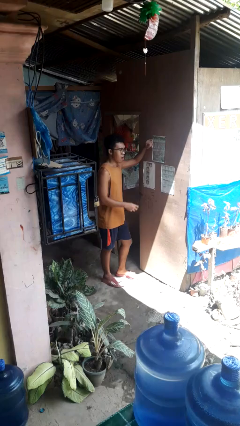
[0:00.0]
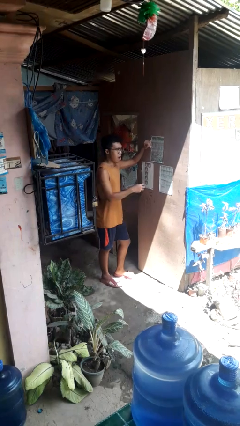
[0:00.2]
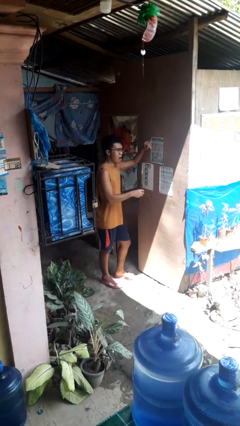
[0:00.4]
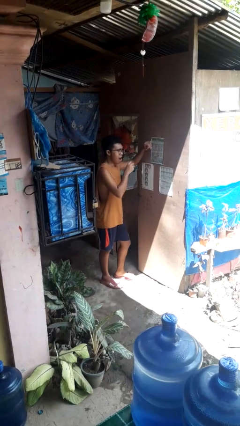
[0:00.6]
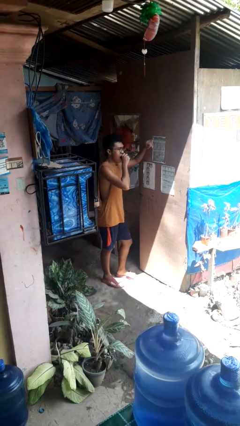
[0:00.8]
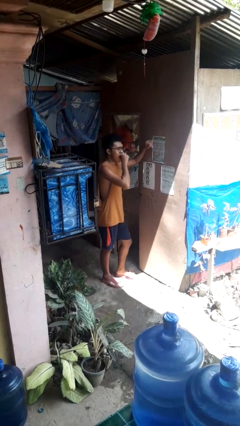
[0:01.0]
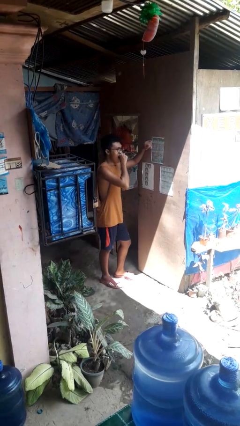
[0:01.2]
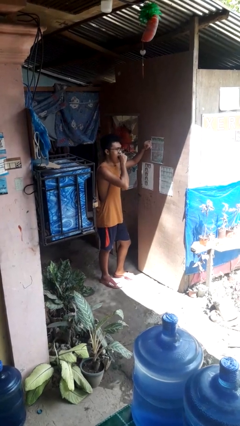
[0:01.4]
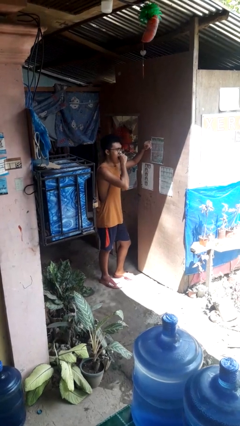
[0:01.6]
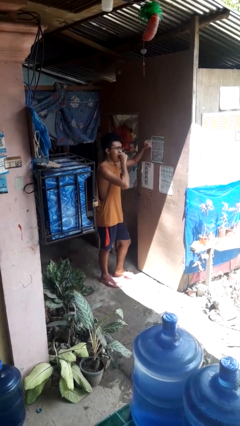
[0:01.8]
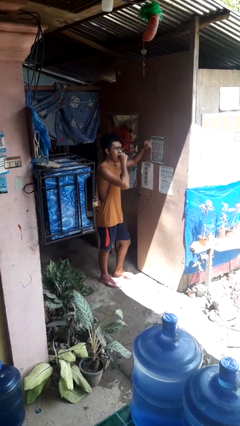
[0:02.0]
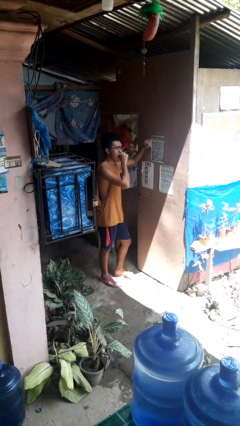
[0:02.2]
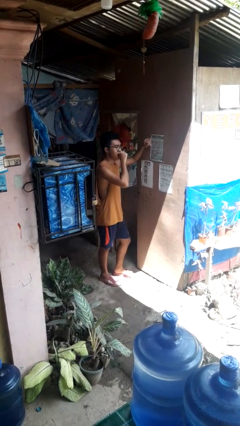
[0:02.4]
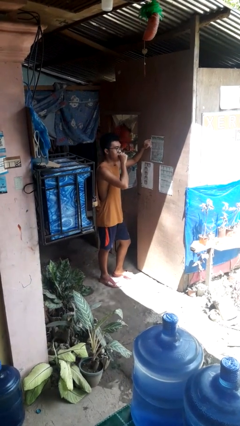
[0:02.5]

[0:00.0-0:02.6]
person yawns

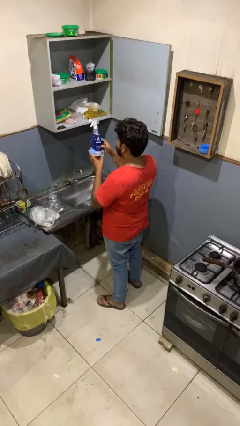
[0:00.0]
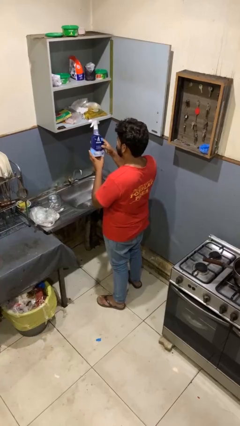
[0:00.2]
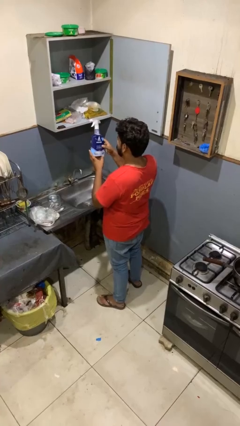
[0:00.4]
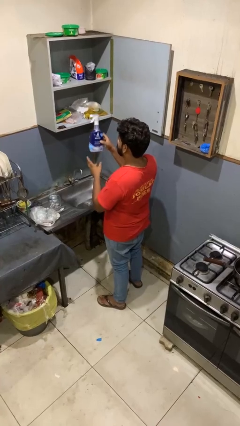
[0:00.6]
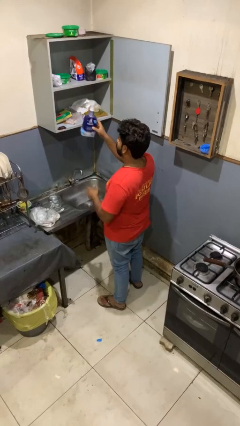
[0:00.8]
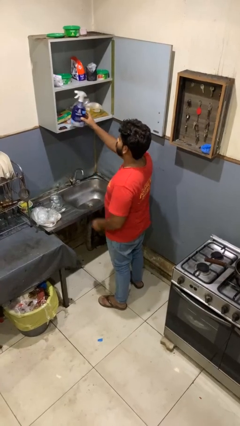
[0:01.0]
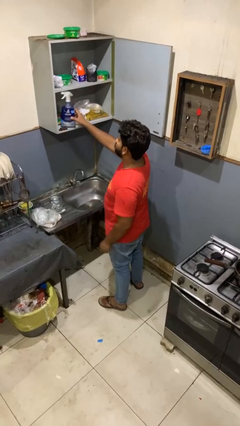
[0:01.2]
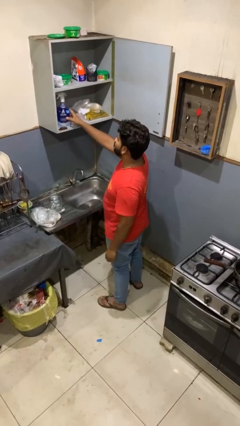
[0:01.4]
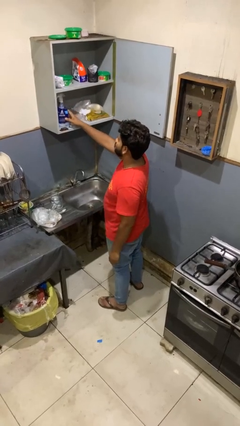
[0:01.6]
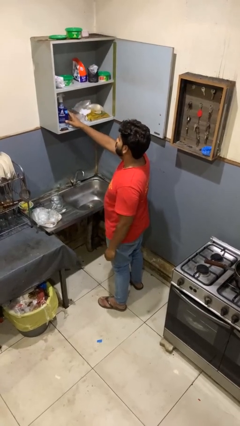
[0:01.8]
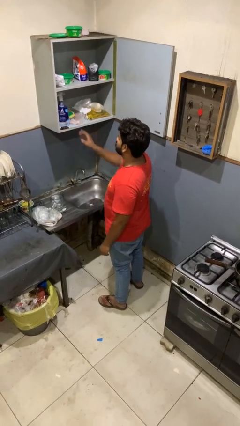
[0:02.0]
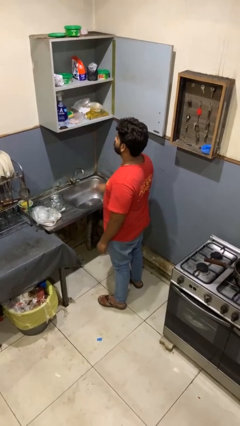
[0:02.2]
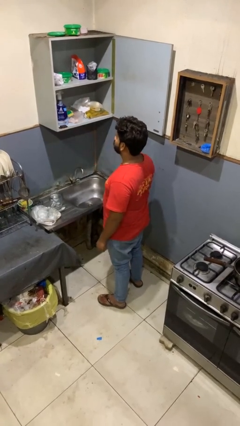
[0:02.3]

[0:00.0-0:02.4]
person puts down object into cabinet

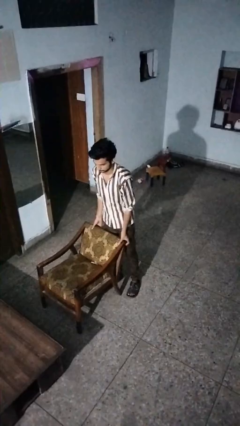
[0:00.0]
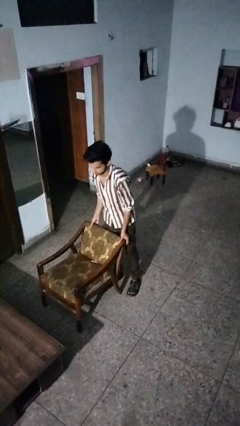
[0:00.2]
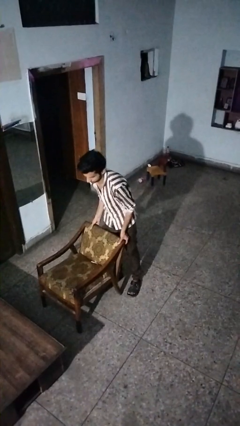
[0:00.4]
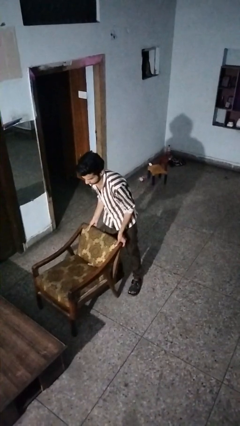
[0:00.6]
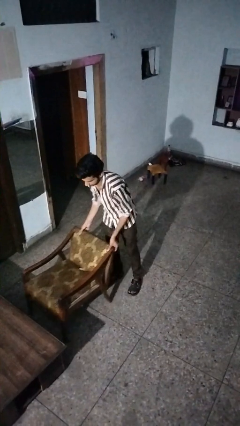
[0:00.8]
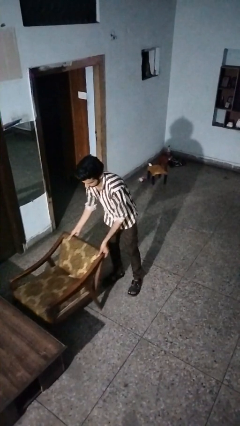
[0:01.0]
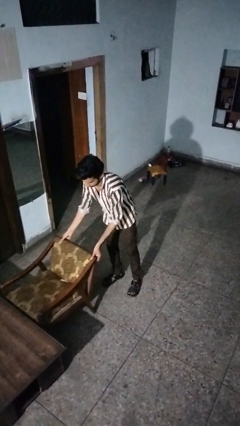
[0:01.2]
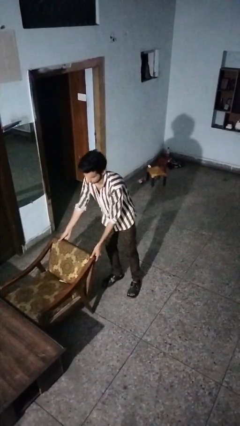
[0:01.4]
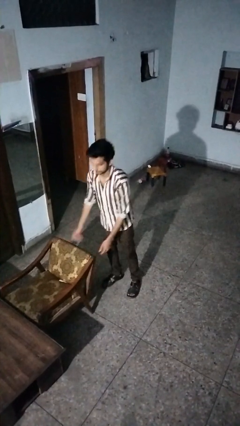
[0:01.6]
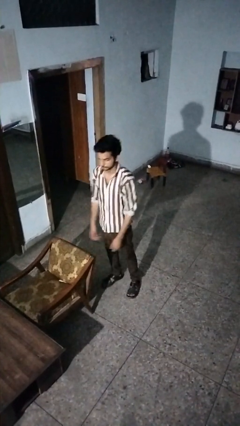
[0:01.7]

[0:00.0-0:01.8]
person pushes in chair

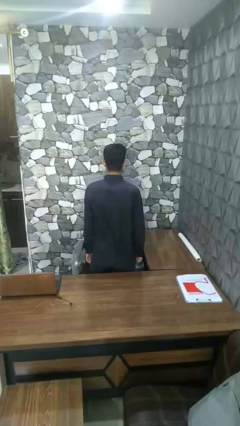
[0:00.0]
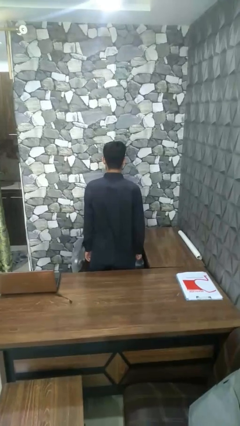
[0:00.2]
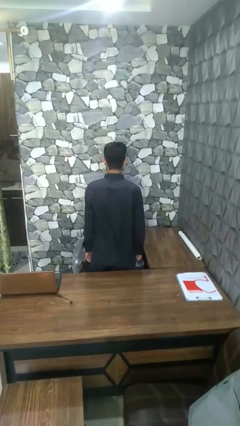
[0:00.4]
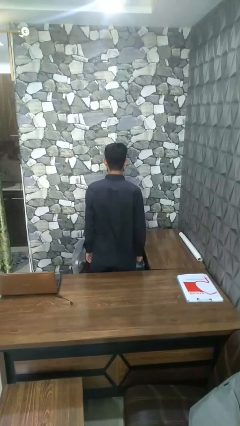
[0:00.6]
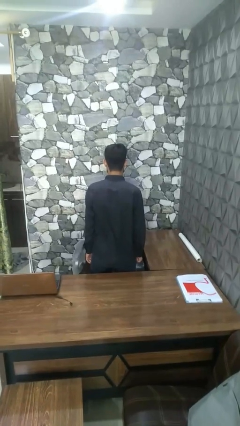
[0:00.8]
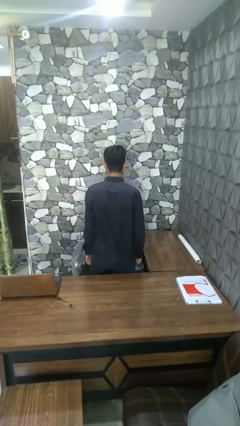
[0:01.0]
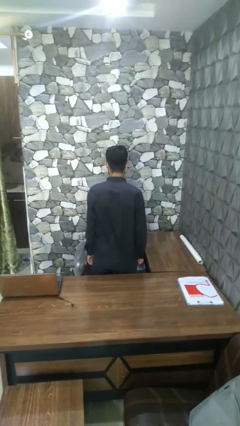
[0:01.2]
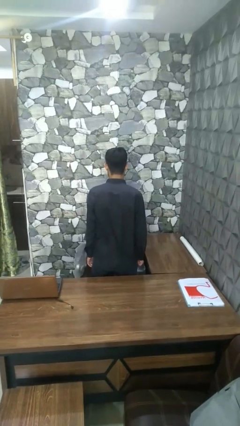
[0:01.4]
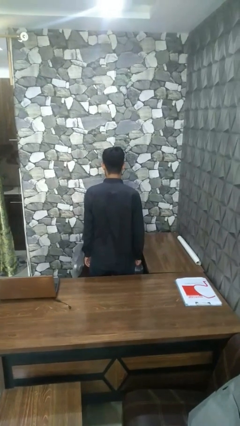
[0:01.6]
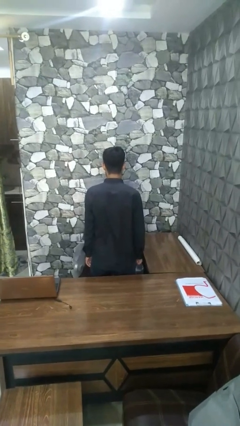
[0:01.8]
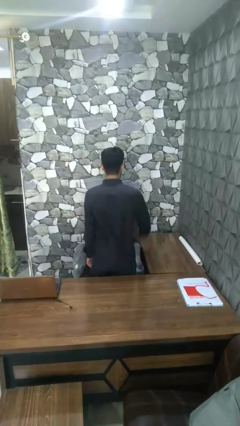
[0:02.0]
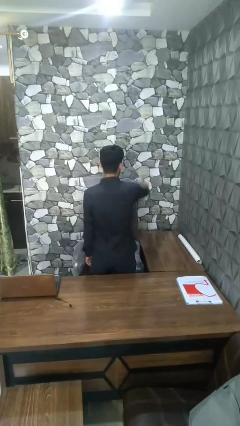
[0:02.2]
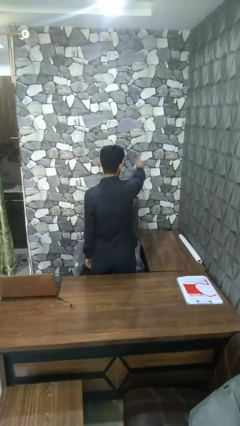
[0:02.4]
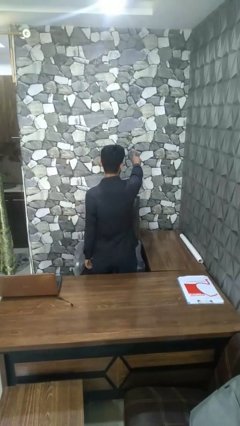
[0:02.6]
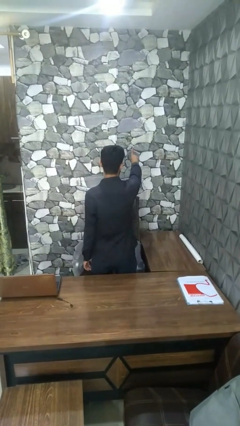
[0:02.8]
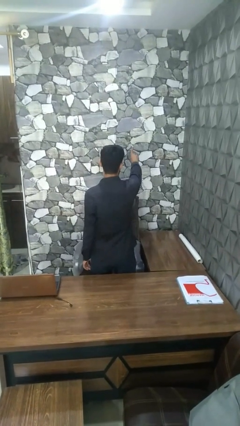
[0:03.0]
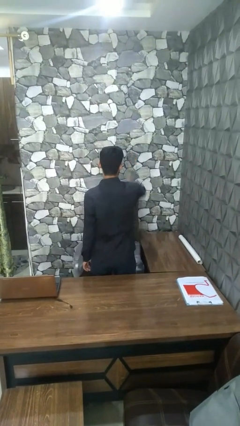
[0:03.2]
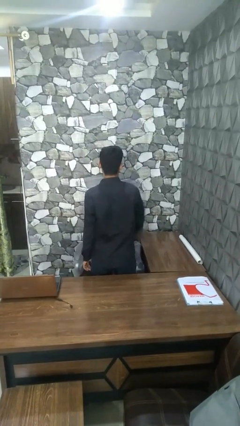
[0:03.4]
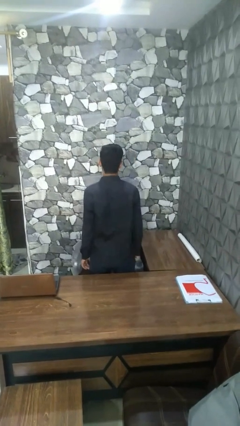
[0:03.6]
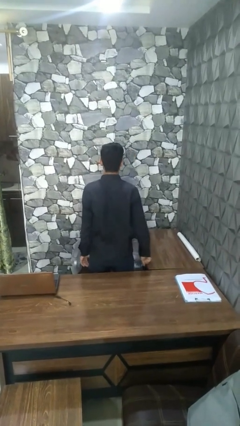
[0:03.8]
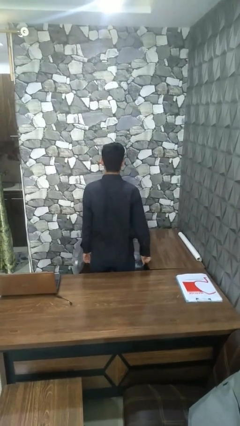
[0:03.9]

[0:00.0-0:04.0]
person gestures number one

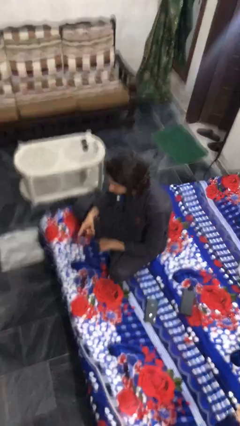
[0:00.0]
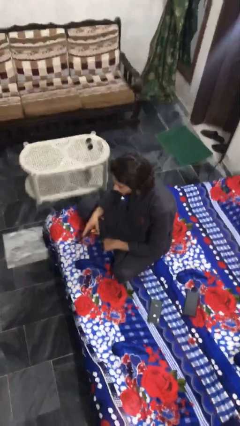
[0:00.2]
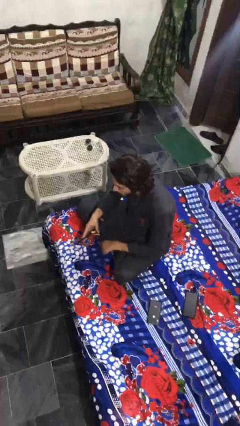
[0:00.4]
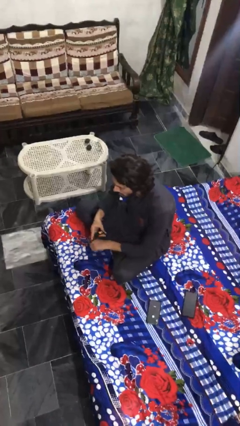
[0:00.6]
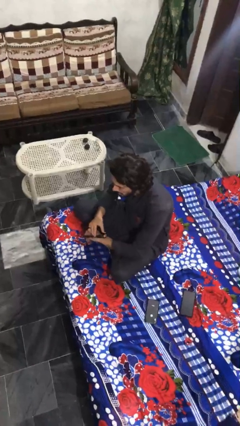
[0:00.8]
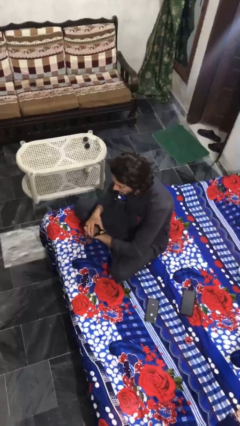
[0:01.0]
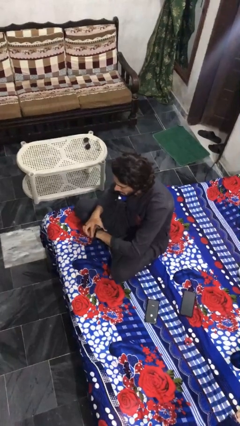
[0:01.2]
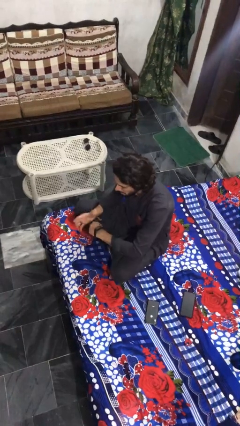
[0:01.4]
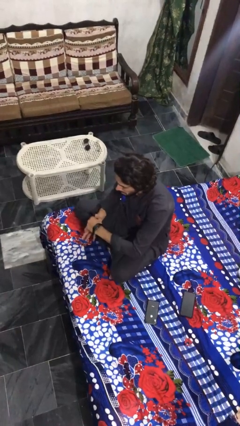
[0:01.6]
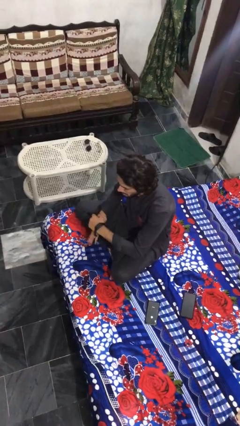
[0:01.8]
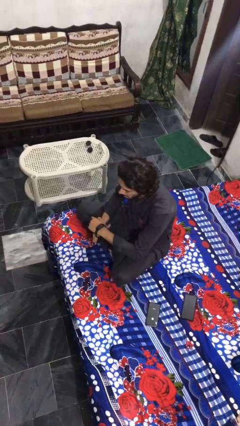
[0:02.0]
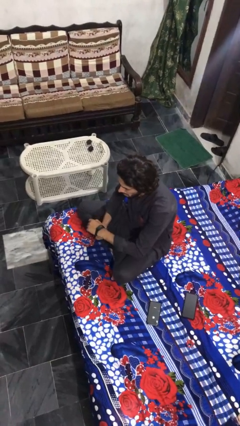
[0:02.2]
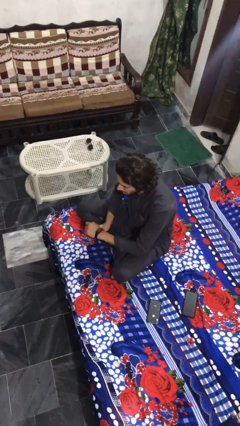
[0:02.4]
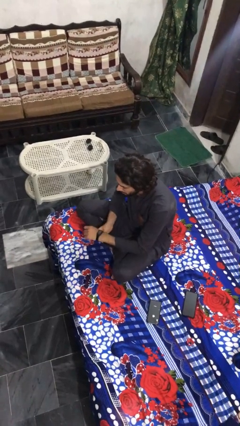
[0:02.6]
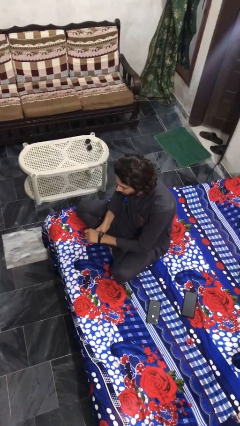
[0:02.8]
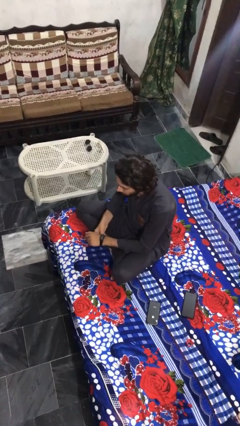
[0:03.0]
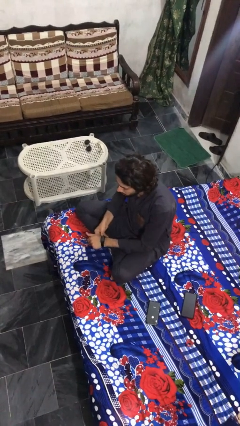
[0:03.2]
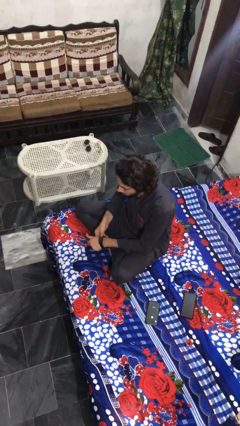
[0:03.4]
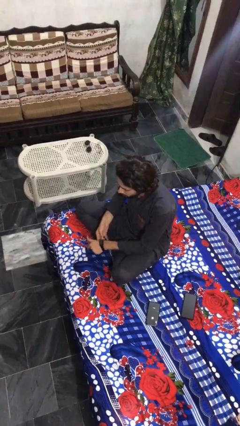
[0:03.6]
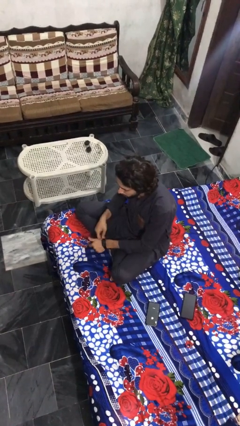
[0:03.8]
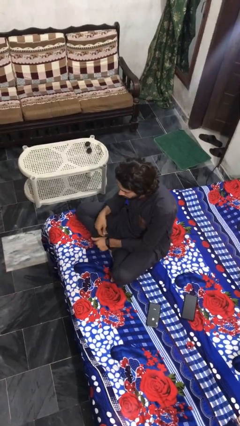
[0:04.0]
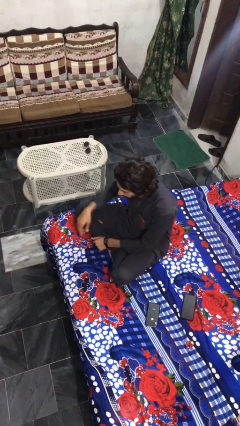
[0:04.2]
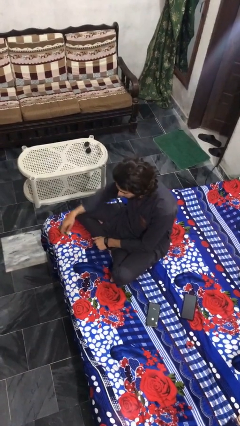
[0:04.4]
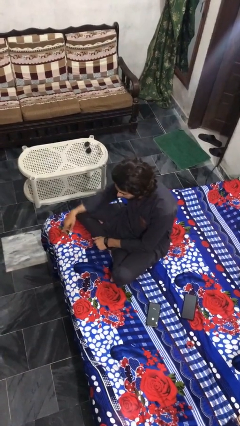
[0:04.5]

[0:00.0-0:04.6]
person puts on wristwatch

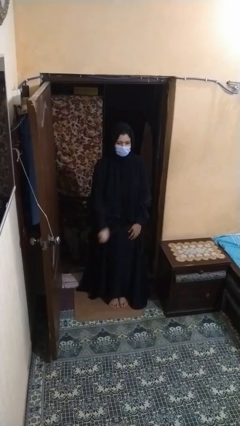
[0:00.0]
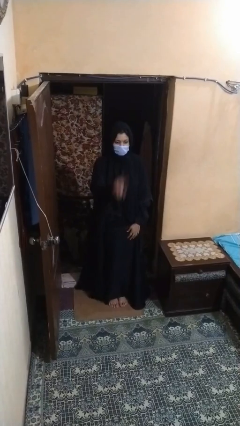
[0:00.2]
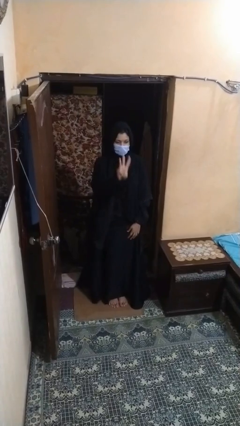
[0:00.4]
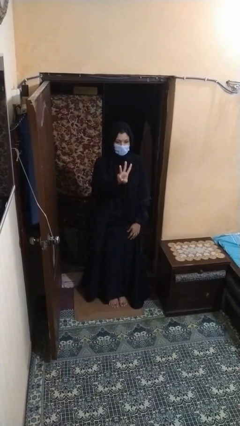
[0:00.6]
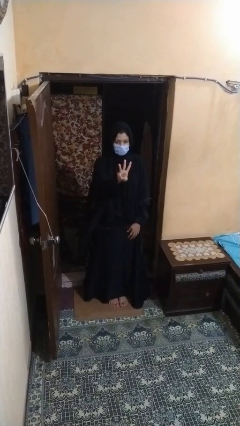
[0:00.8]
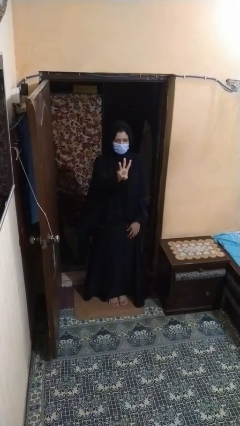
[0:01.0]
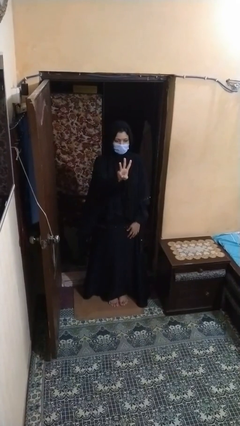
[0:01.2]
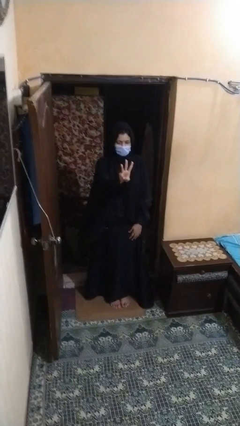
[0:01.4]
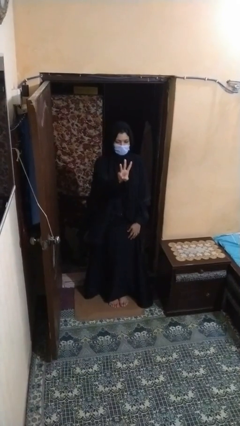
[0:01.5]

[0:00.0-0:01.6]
person gestures number three
